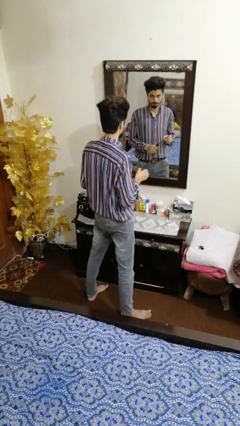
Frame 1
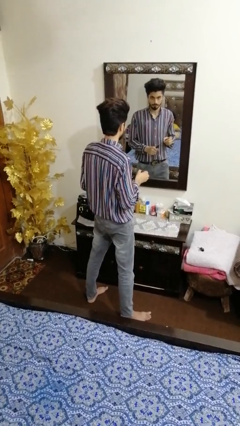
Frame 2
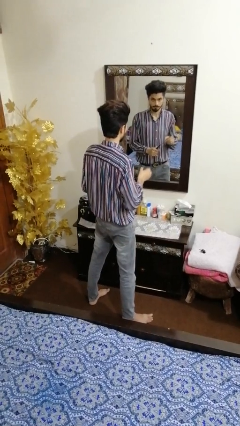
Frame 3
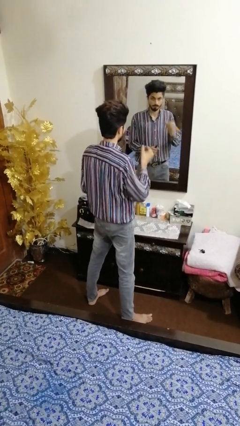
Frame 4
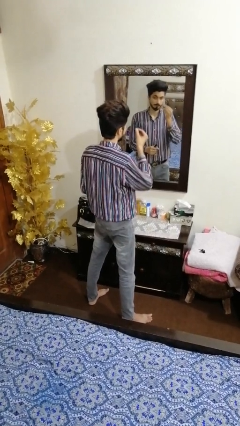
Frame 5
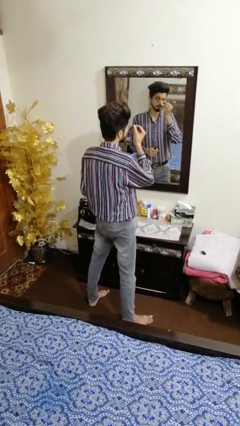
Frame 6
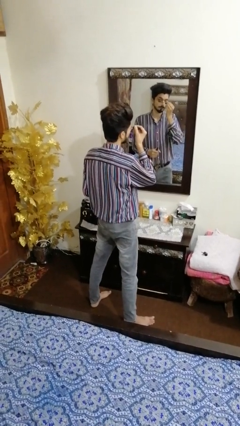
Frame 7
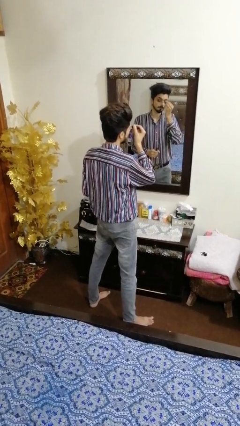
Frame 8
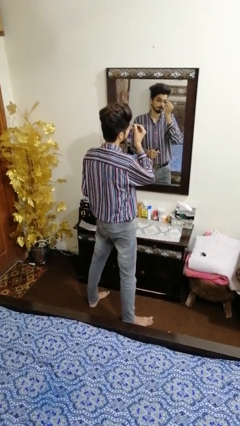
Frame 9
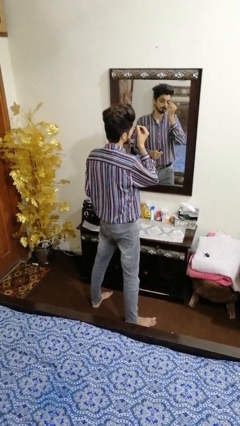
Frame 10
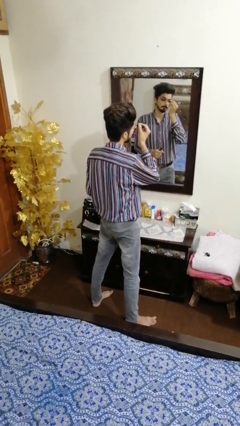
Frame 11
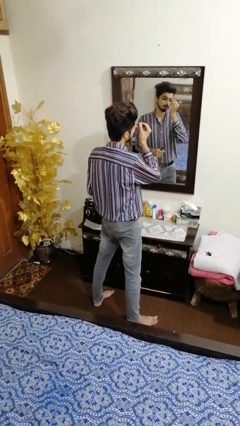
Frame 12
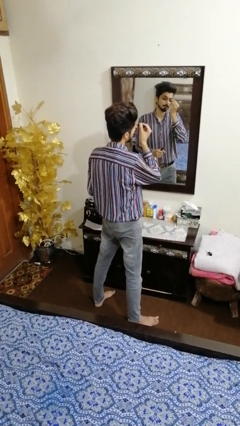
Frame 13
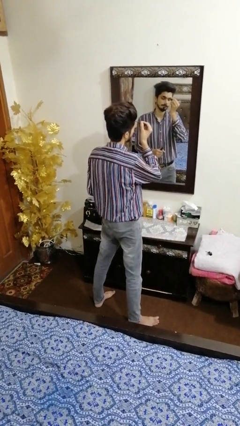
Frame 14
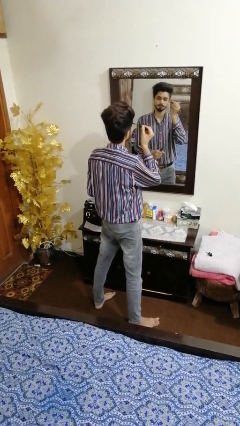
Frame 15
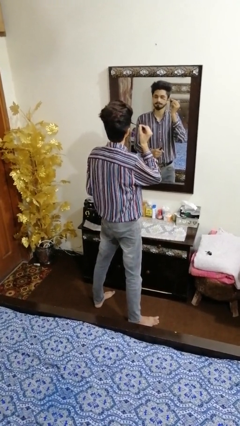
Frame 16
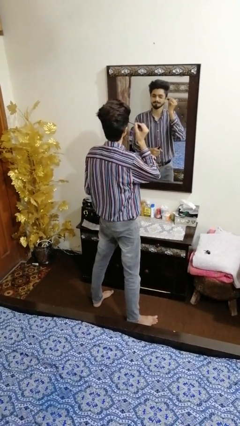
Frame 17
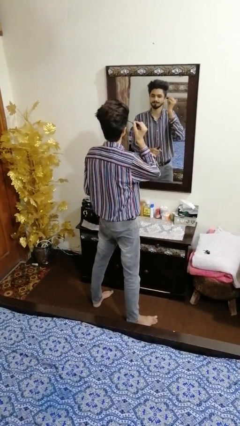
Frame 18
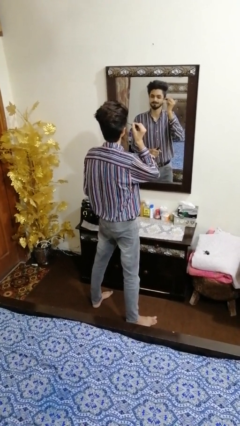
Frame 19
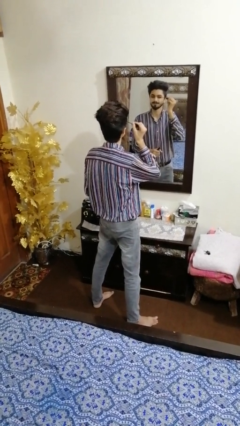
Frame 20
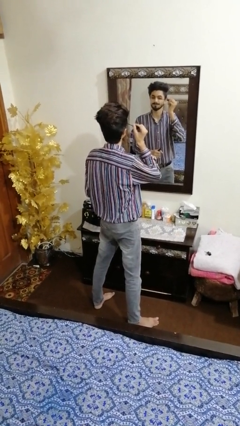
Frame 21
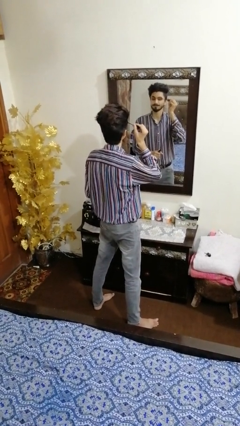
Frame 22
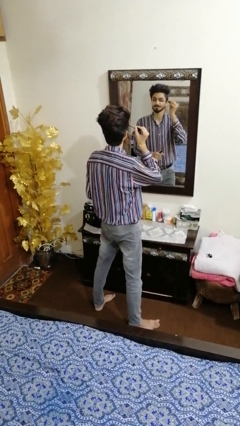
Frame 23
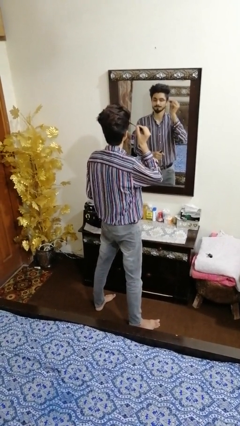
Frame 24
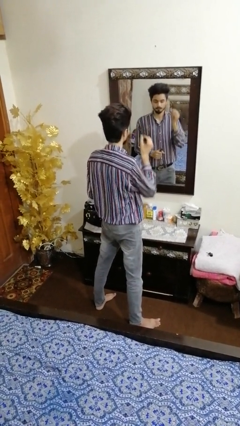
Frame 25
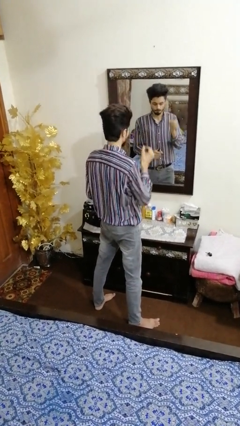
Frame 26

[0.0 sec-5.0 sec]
person applies eye makeup

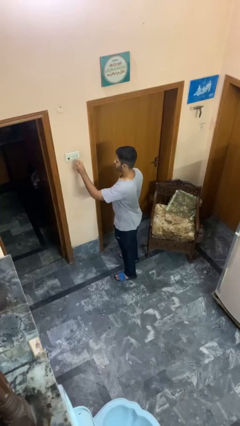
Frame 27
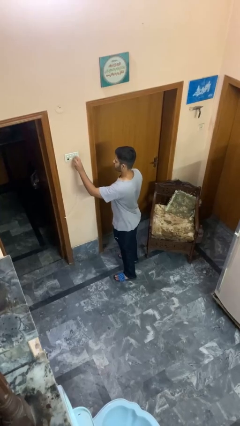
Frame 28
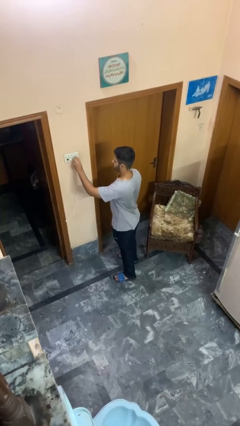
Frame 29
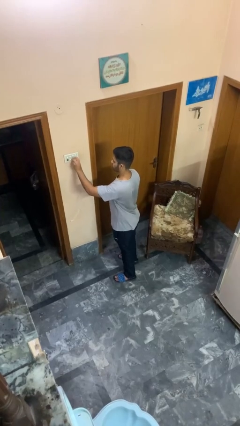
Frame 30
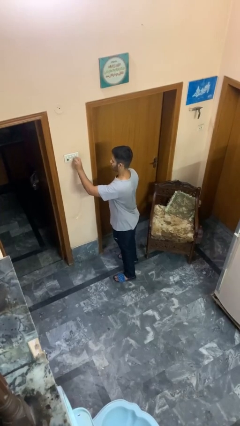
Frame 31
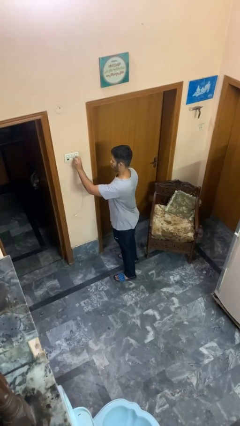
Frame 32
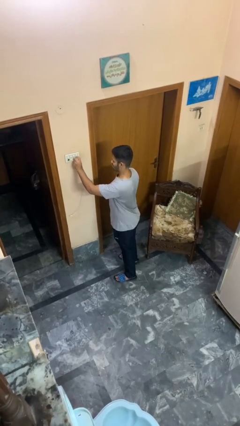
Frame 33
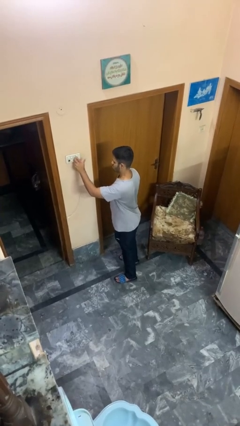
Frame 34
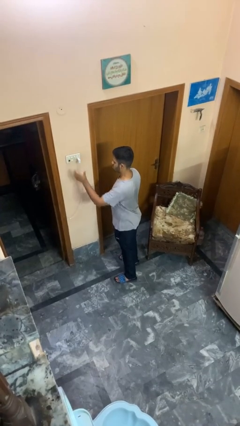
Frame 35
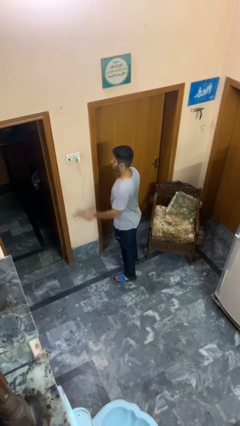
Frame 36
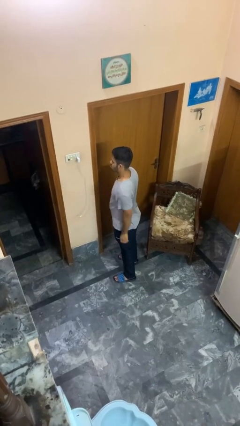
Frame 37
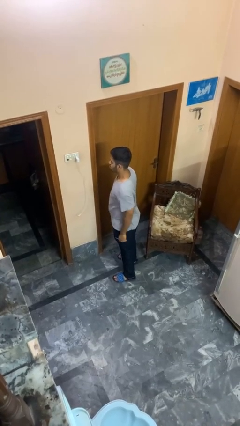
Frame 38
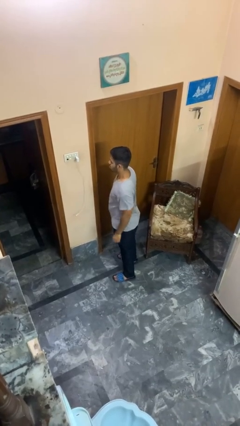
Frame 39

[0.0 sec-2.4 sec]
person plugs into electrical socket

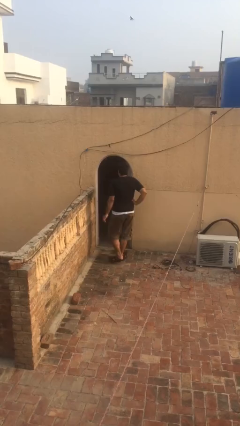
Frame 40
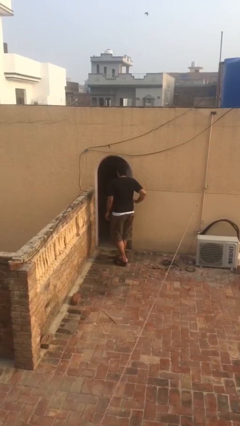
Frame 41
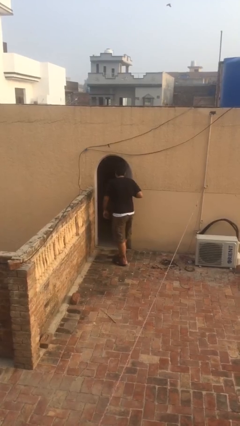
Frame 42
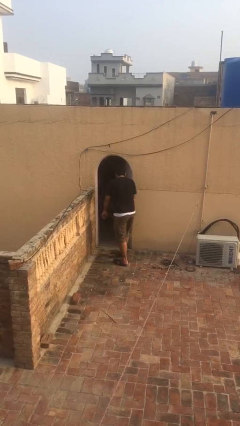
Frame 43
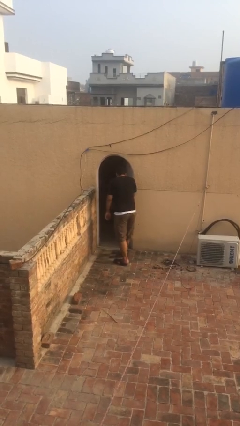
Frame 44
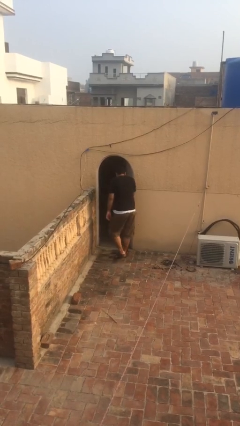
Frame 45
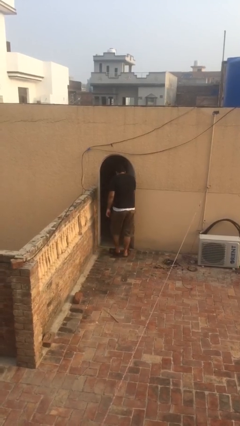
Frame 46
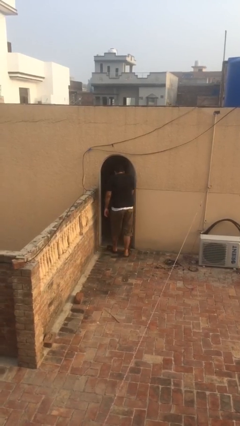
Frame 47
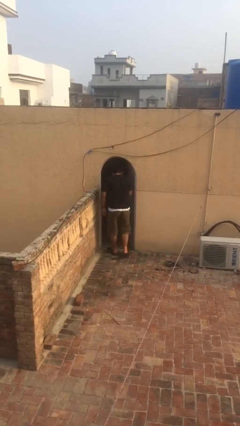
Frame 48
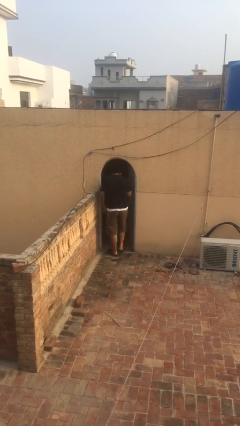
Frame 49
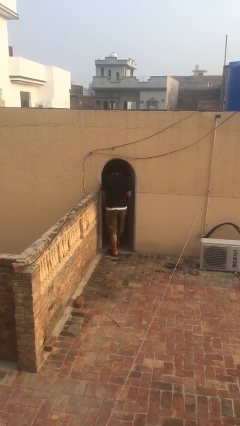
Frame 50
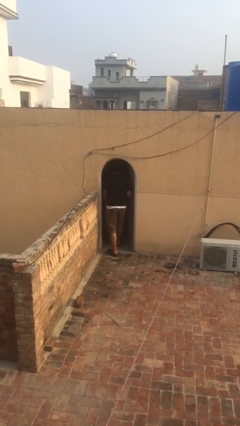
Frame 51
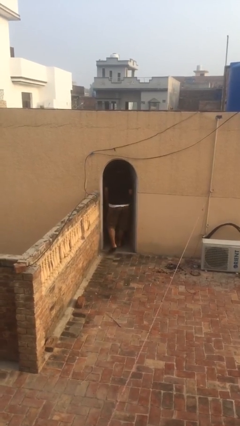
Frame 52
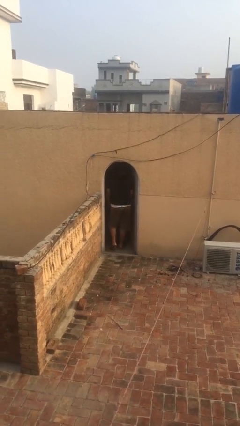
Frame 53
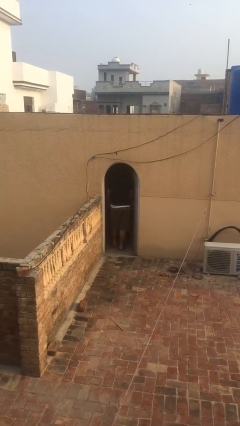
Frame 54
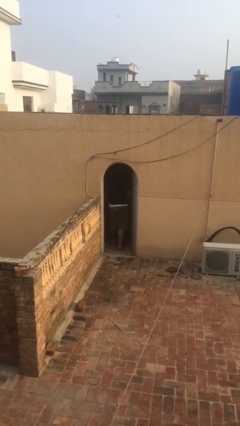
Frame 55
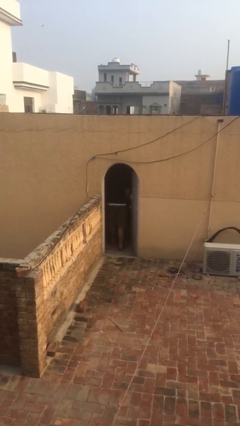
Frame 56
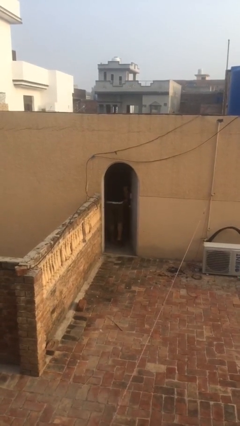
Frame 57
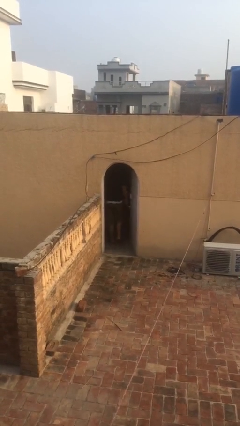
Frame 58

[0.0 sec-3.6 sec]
person exits scene through structure

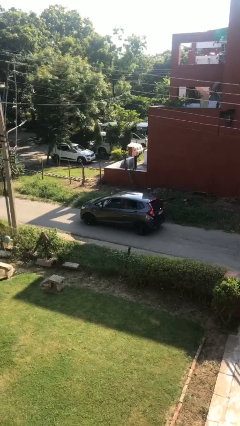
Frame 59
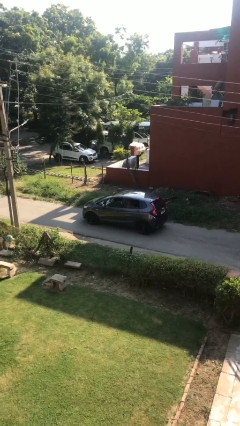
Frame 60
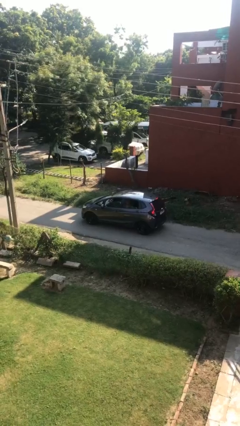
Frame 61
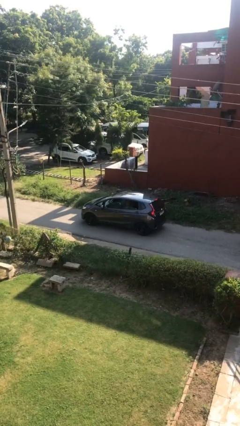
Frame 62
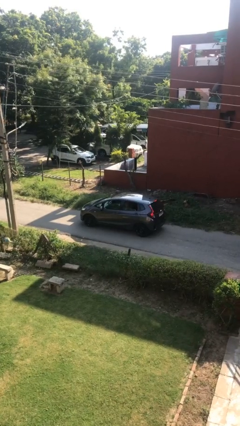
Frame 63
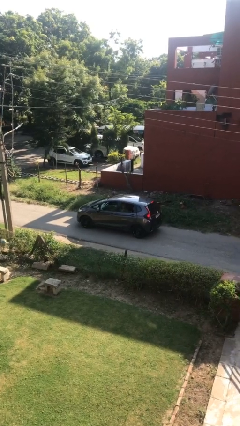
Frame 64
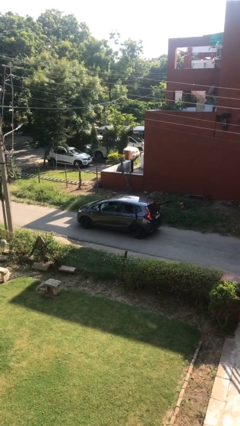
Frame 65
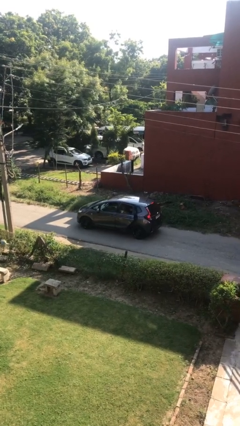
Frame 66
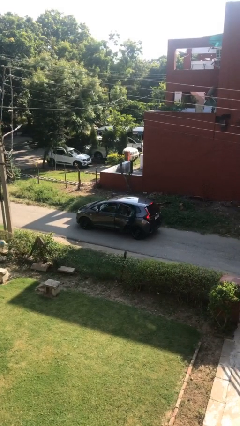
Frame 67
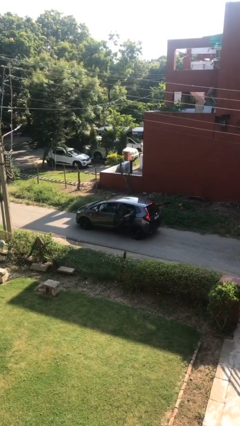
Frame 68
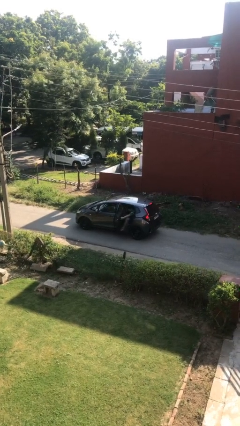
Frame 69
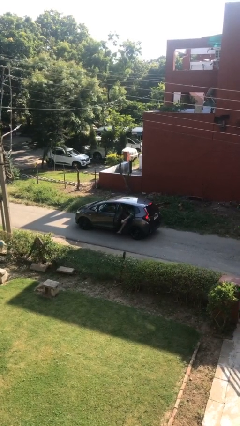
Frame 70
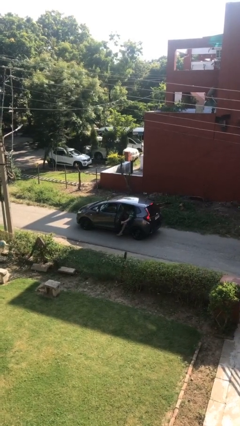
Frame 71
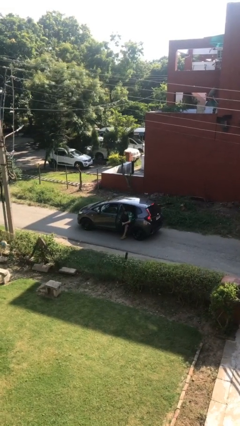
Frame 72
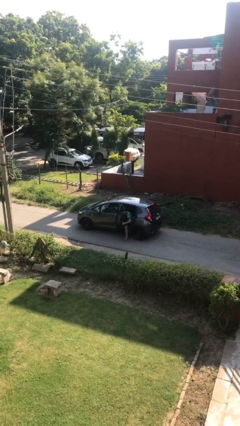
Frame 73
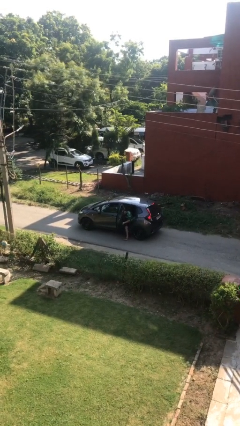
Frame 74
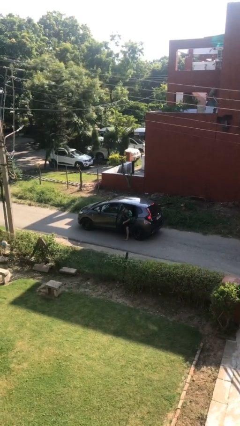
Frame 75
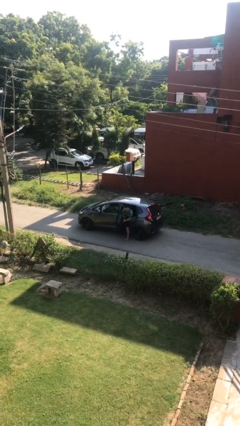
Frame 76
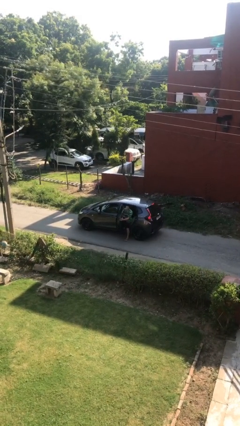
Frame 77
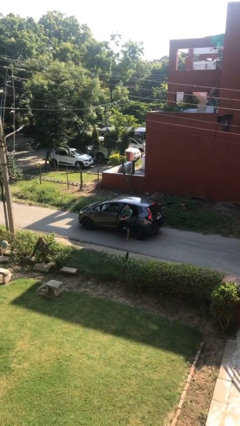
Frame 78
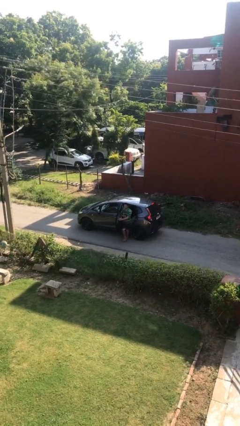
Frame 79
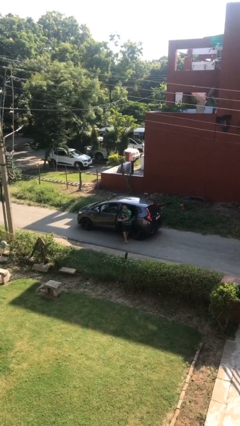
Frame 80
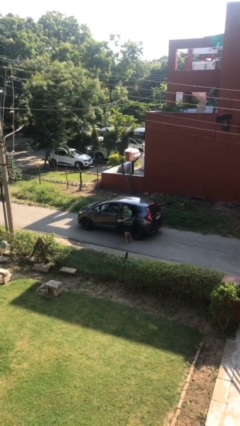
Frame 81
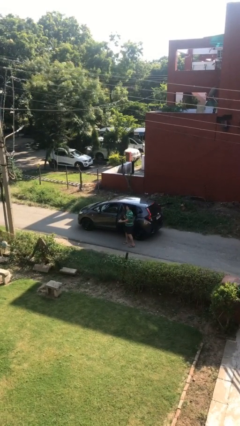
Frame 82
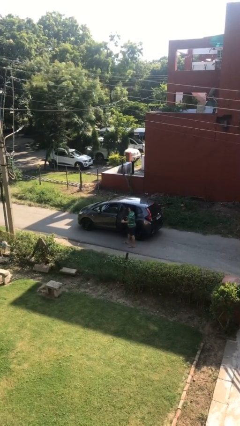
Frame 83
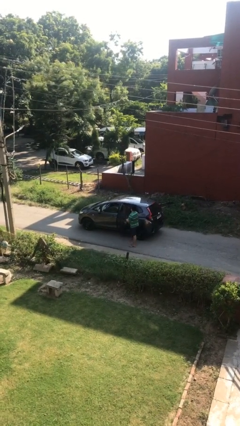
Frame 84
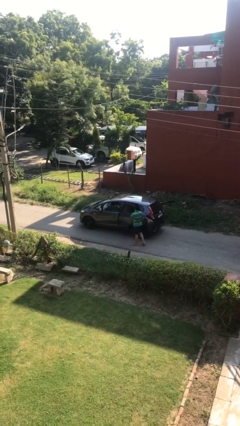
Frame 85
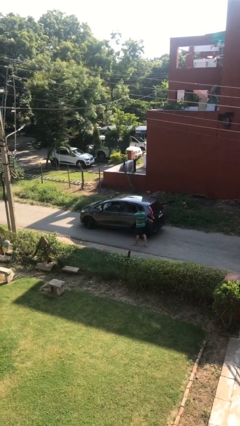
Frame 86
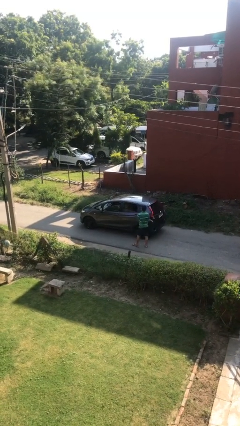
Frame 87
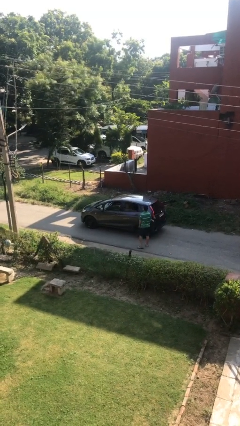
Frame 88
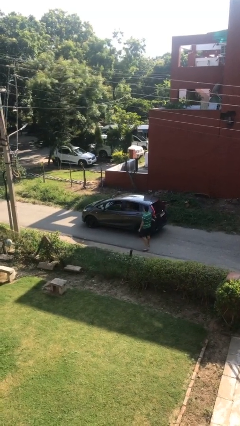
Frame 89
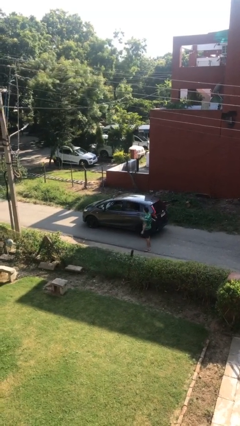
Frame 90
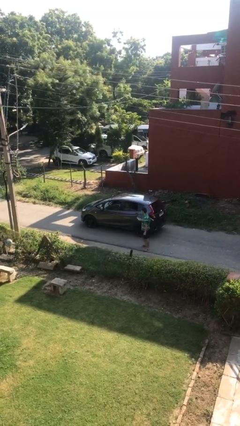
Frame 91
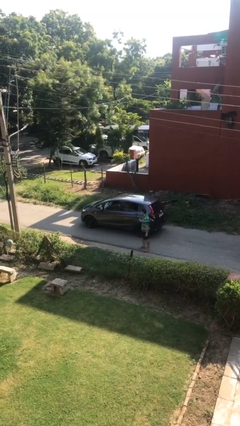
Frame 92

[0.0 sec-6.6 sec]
car drops off person

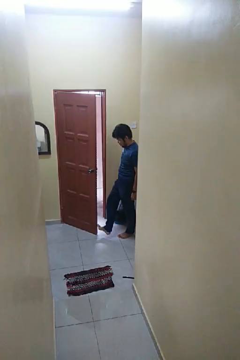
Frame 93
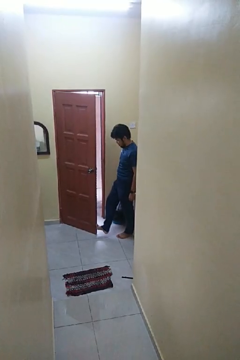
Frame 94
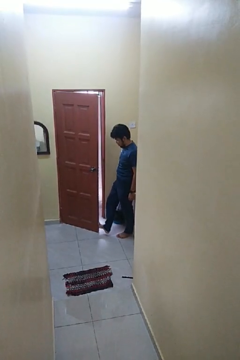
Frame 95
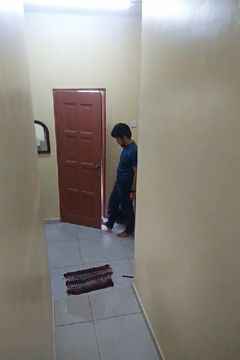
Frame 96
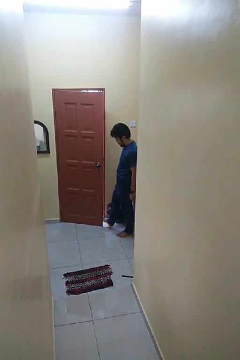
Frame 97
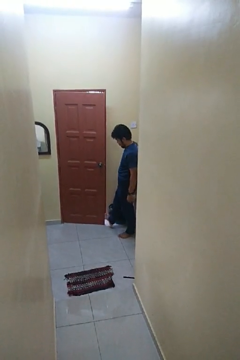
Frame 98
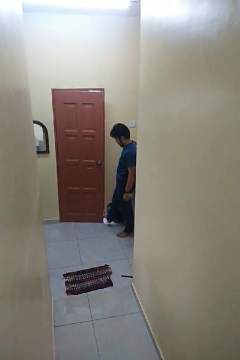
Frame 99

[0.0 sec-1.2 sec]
person closes door with foot
